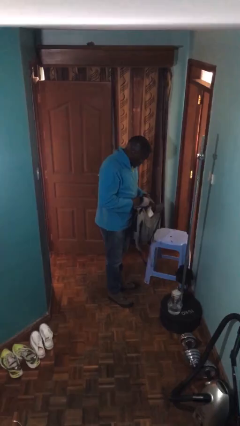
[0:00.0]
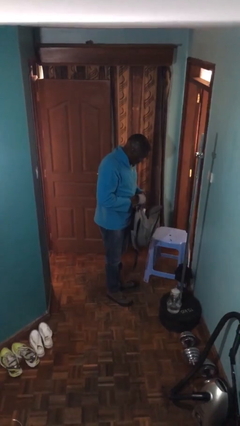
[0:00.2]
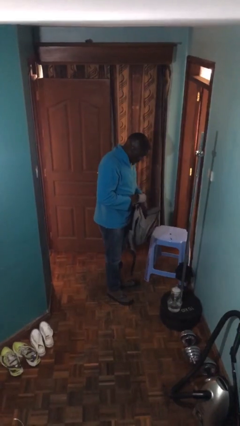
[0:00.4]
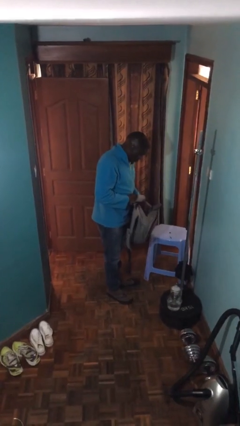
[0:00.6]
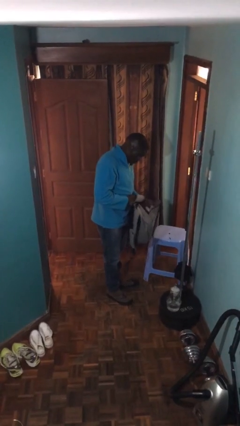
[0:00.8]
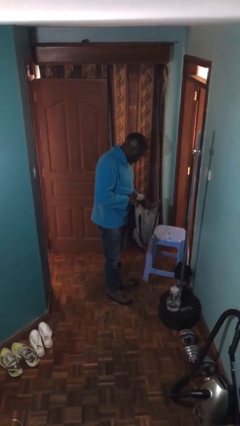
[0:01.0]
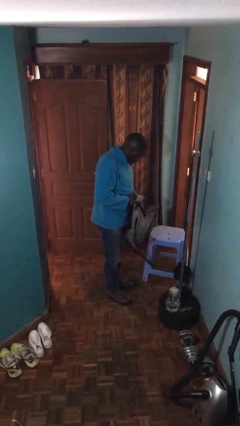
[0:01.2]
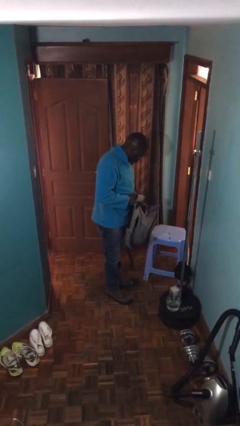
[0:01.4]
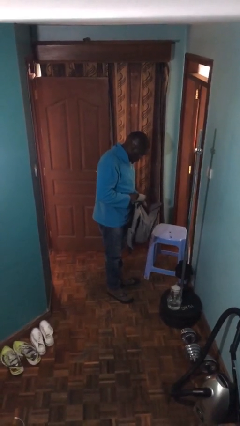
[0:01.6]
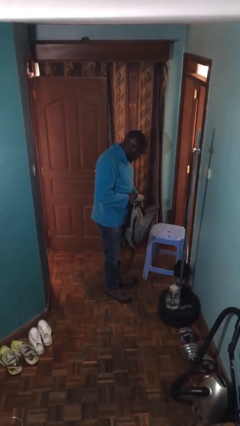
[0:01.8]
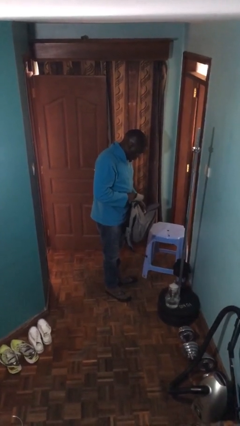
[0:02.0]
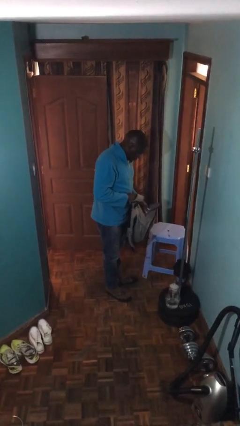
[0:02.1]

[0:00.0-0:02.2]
person searches in backpack

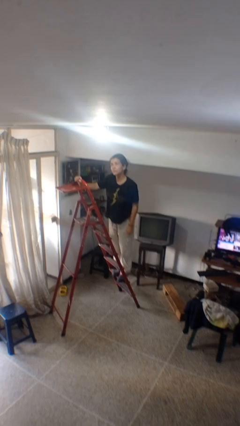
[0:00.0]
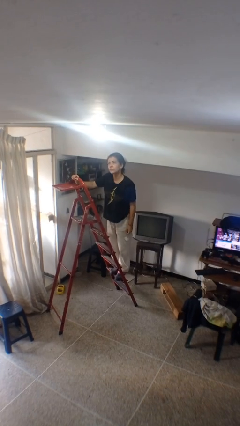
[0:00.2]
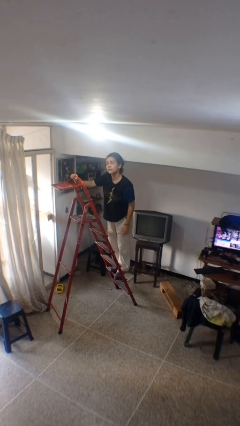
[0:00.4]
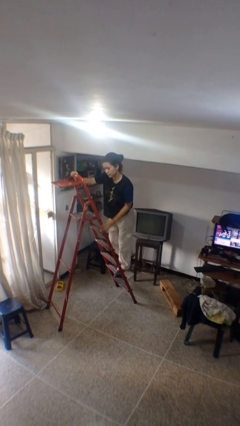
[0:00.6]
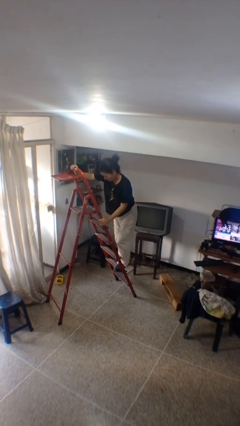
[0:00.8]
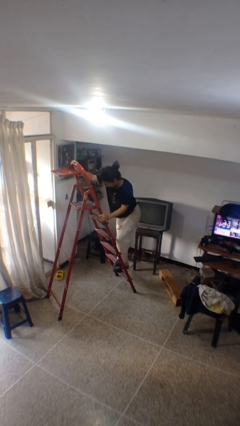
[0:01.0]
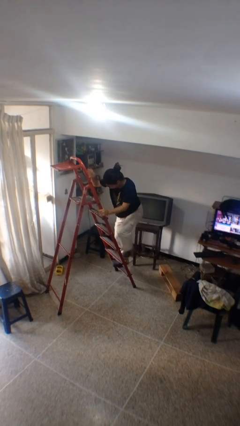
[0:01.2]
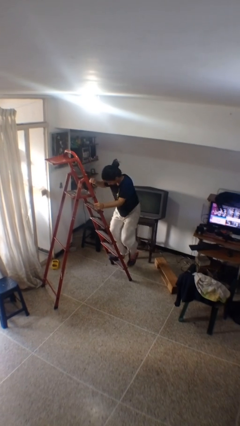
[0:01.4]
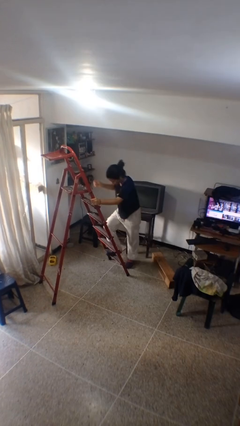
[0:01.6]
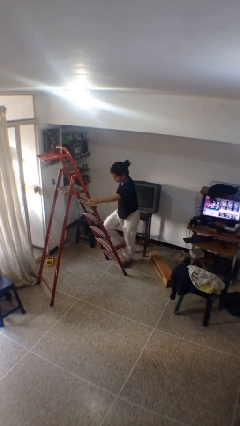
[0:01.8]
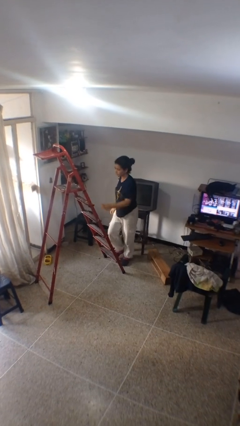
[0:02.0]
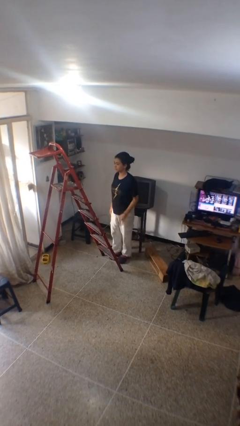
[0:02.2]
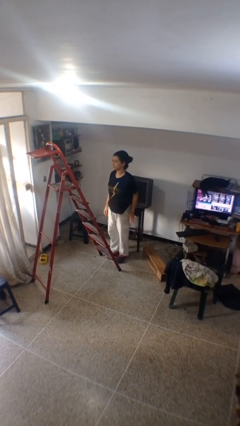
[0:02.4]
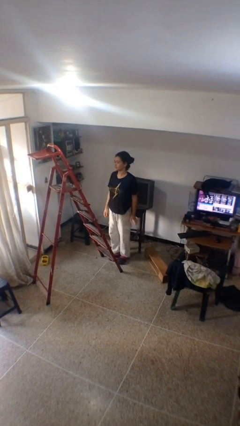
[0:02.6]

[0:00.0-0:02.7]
person climbs down ladder

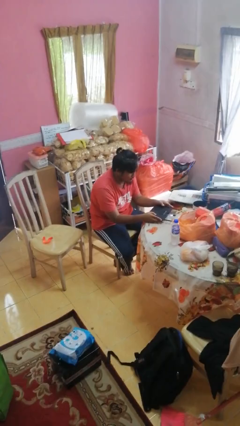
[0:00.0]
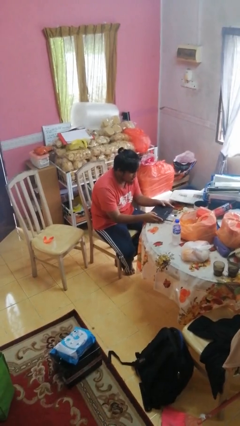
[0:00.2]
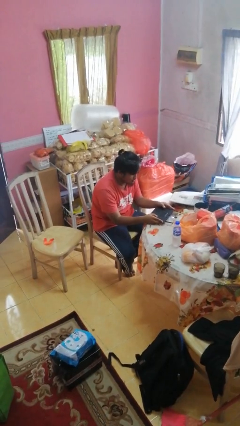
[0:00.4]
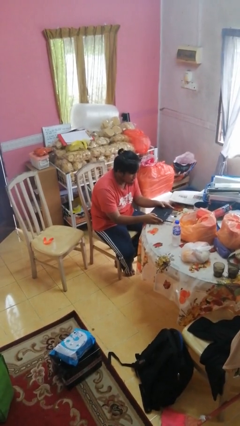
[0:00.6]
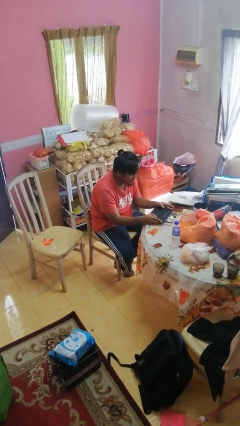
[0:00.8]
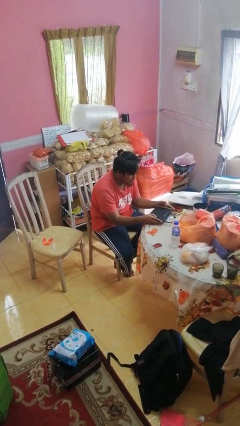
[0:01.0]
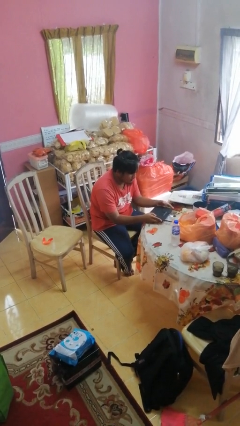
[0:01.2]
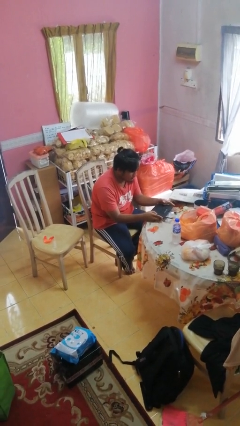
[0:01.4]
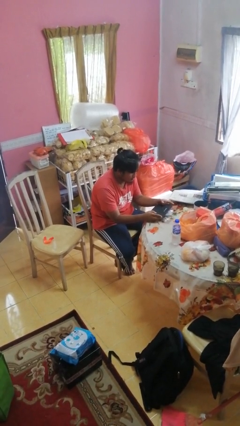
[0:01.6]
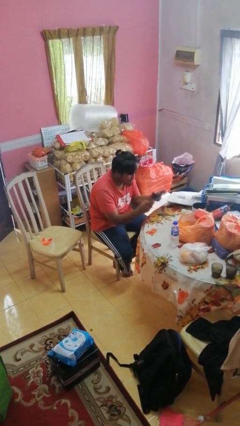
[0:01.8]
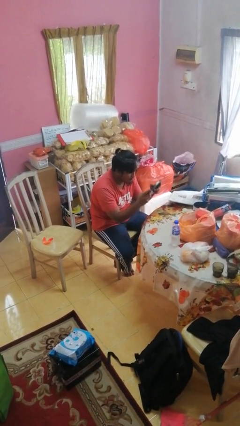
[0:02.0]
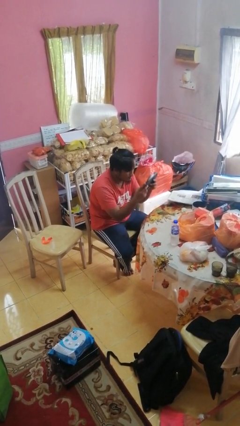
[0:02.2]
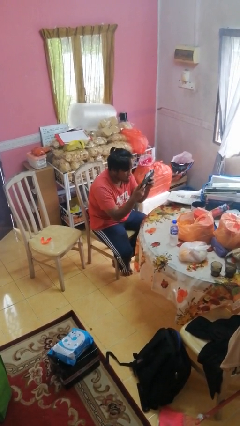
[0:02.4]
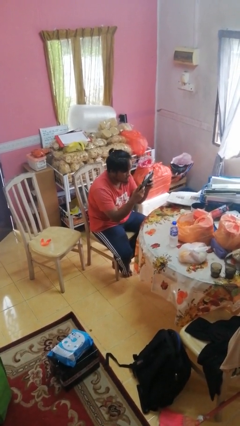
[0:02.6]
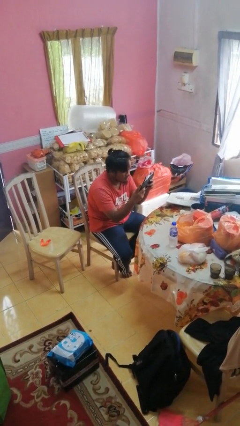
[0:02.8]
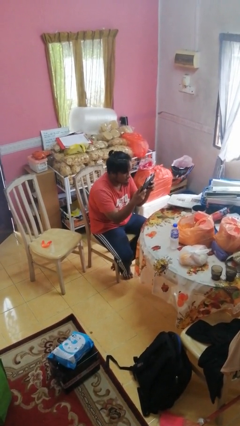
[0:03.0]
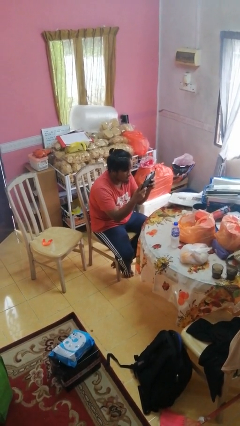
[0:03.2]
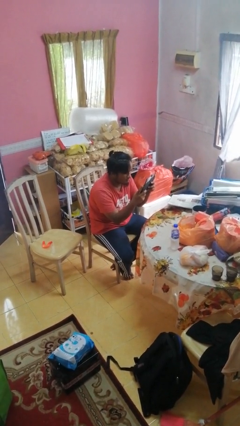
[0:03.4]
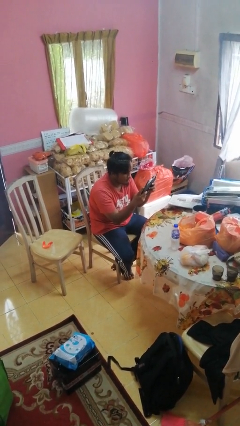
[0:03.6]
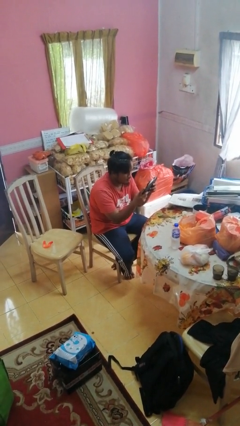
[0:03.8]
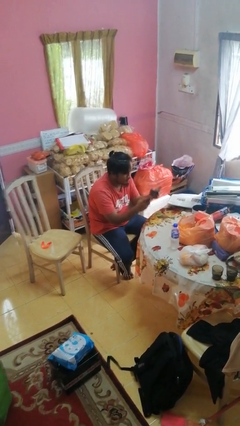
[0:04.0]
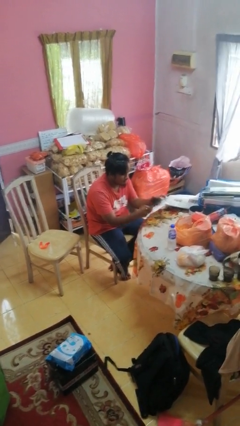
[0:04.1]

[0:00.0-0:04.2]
person interacts with handheld game

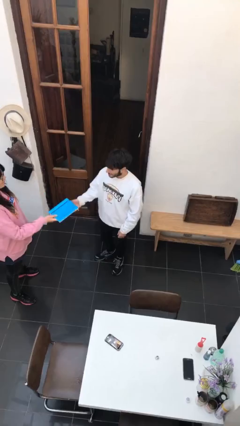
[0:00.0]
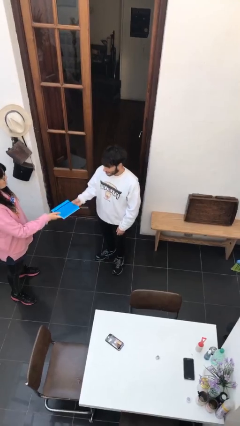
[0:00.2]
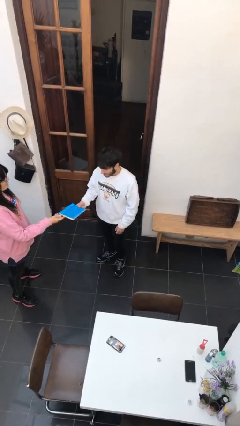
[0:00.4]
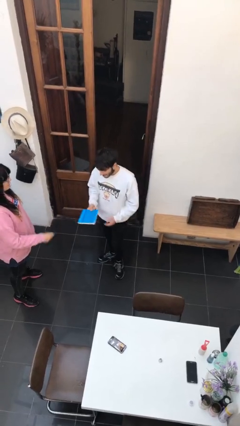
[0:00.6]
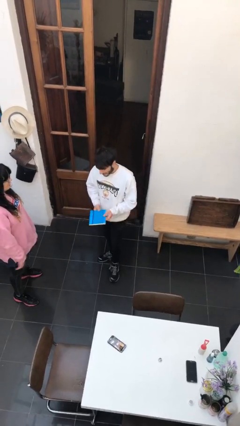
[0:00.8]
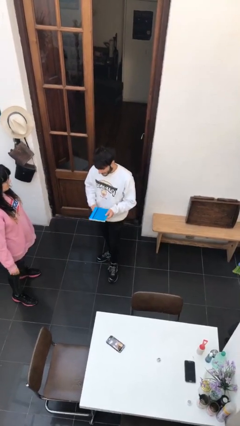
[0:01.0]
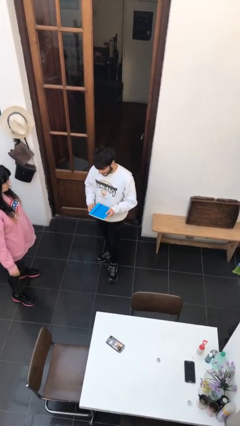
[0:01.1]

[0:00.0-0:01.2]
person transfers object to person

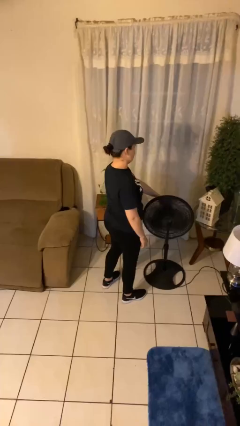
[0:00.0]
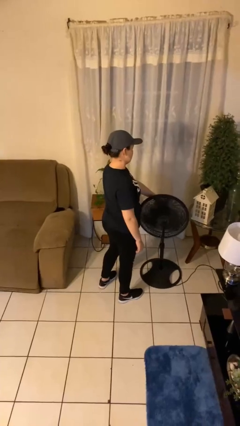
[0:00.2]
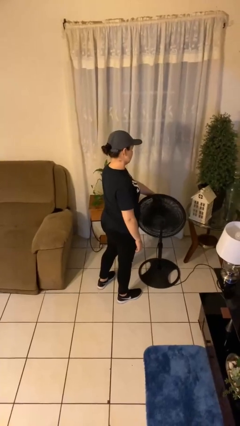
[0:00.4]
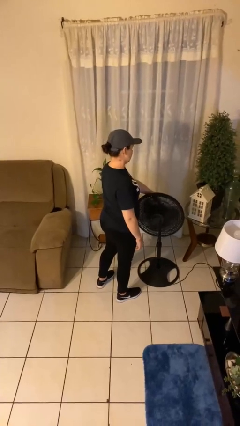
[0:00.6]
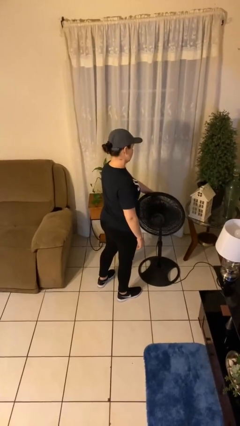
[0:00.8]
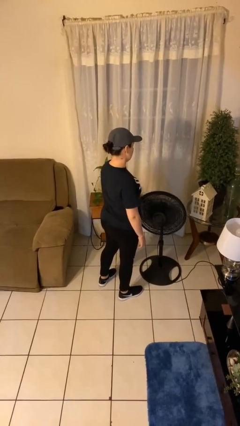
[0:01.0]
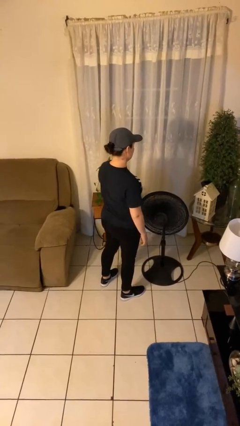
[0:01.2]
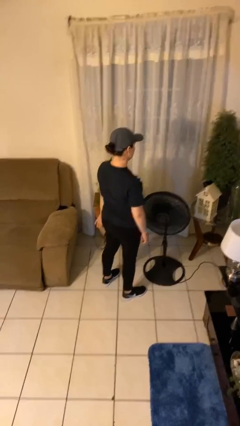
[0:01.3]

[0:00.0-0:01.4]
person turns on fan

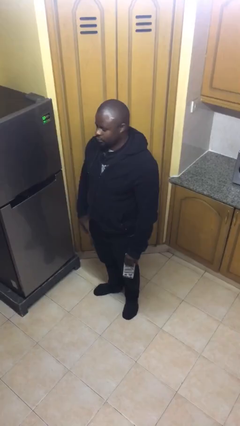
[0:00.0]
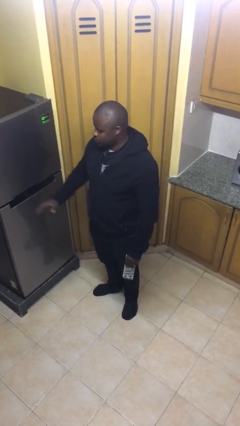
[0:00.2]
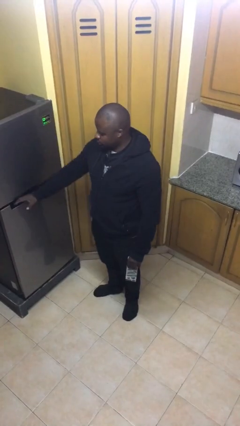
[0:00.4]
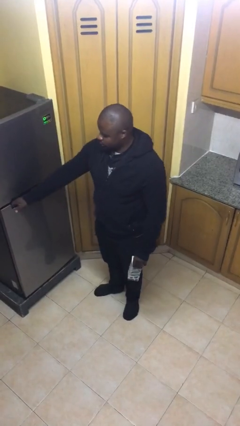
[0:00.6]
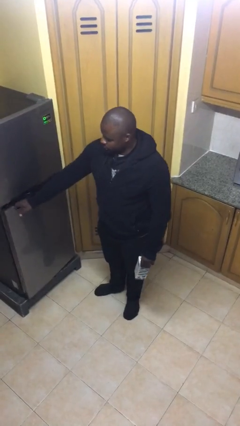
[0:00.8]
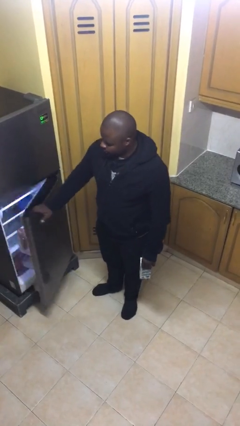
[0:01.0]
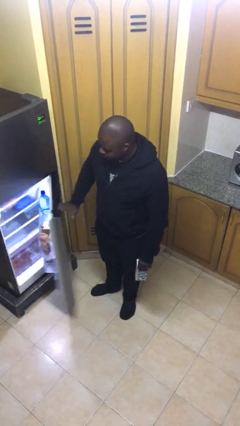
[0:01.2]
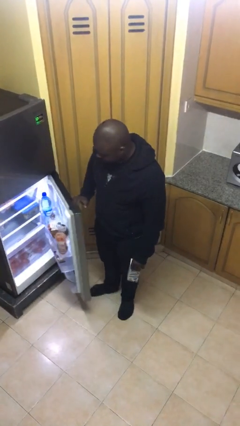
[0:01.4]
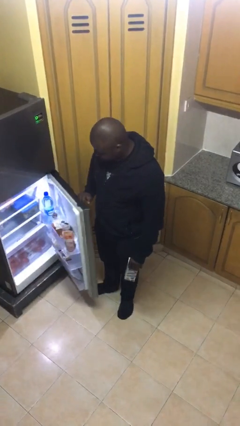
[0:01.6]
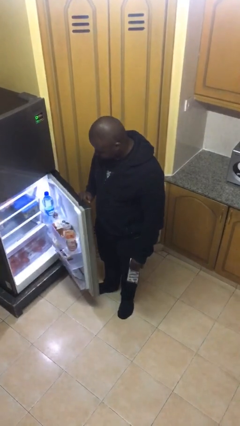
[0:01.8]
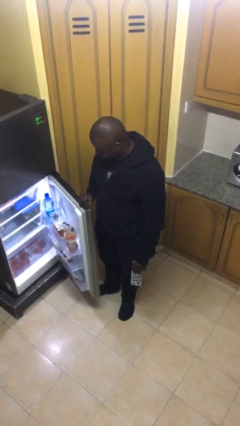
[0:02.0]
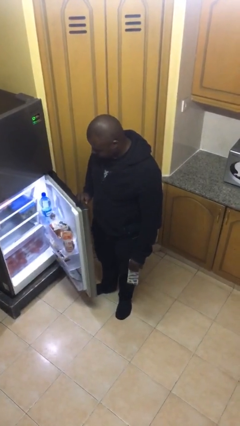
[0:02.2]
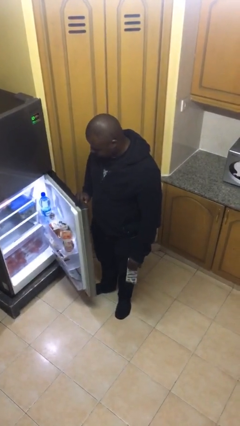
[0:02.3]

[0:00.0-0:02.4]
person opens refrigerator

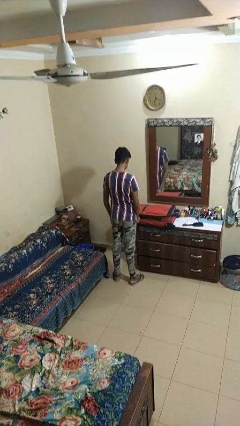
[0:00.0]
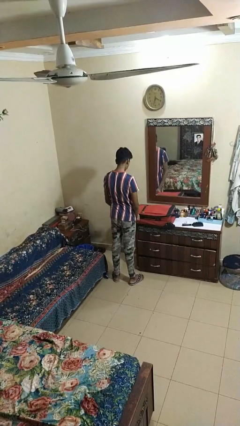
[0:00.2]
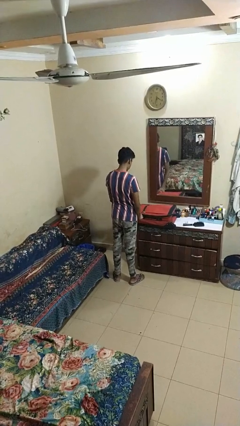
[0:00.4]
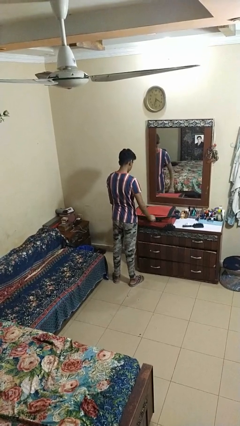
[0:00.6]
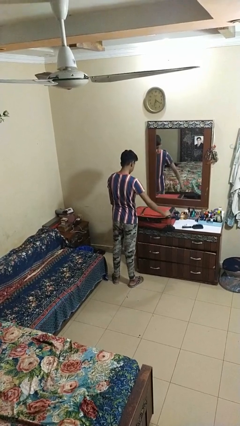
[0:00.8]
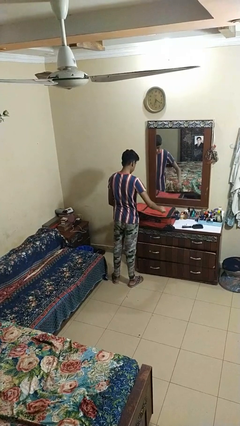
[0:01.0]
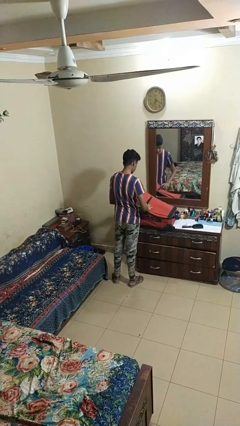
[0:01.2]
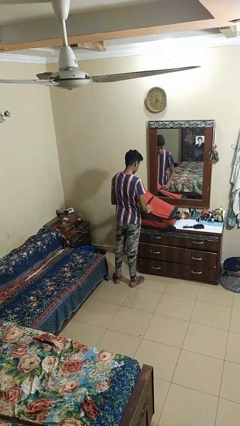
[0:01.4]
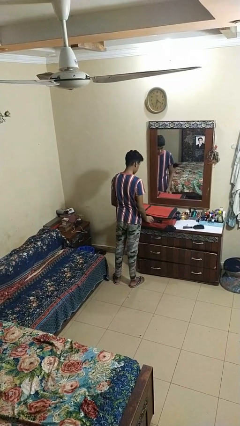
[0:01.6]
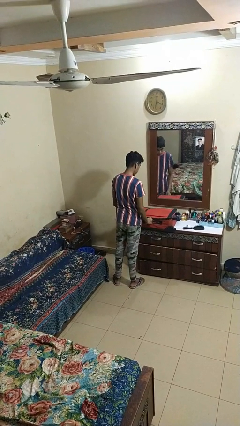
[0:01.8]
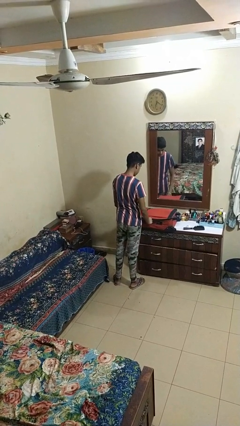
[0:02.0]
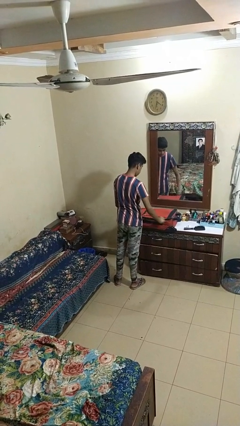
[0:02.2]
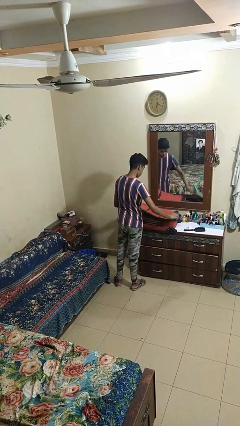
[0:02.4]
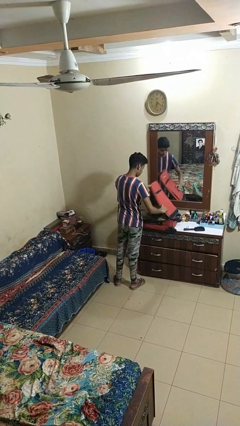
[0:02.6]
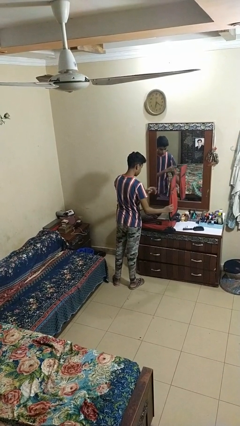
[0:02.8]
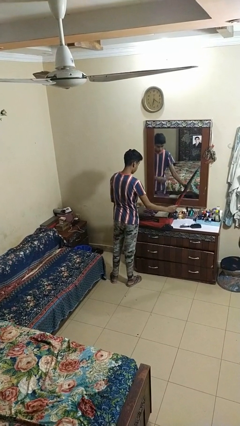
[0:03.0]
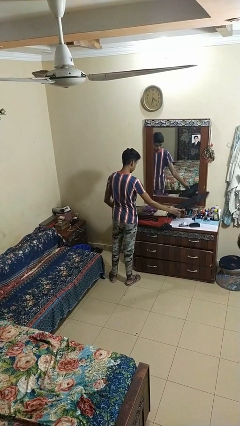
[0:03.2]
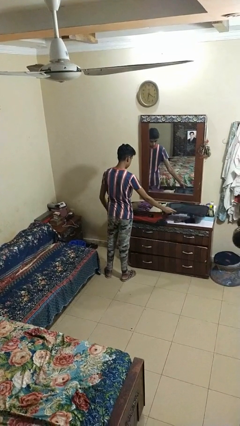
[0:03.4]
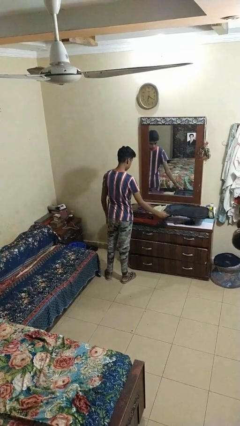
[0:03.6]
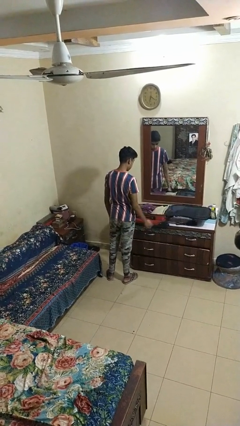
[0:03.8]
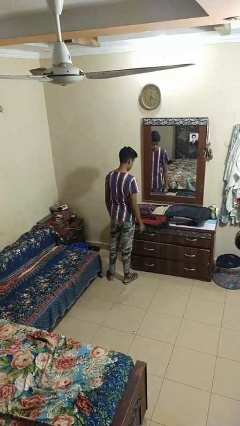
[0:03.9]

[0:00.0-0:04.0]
person opens suitcase
